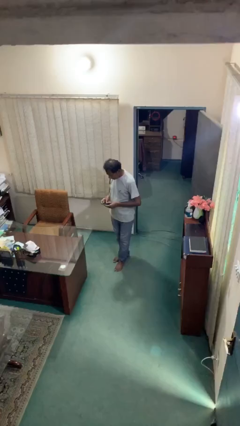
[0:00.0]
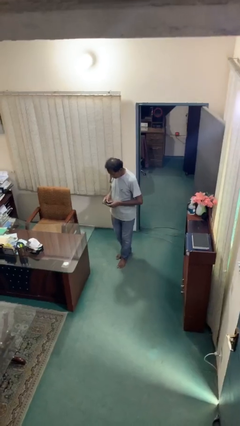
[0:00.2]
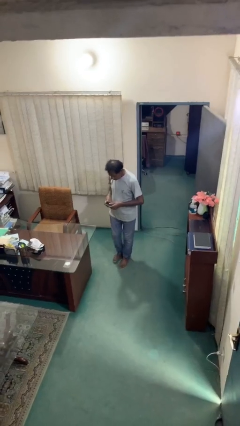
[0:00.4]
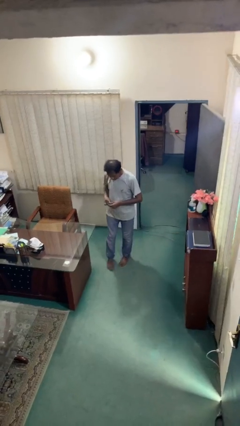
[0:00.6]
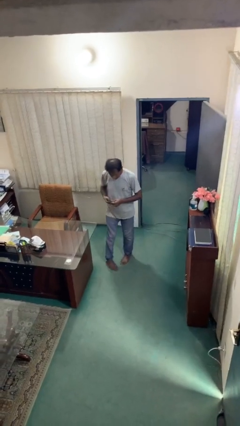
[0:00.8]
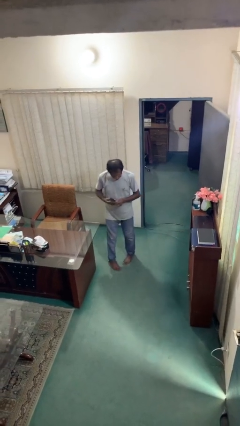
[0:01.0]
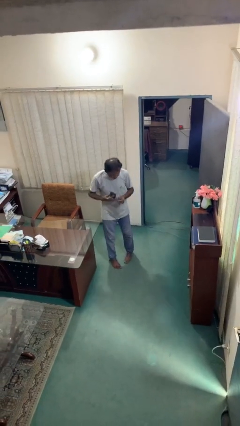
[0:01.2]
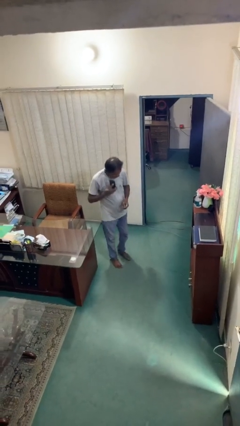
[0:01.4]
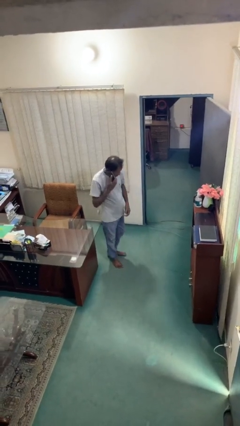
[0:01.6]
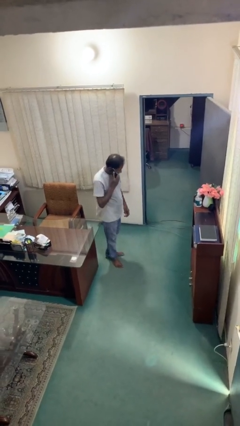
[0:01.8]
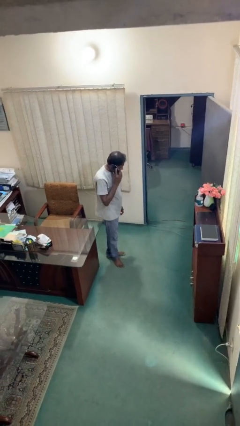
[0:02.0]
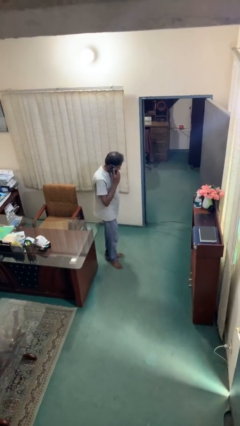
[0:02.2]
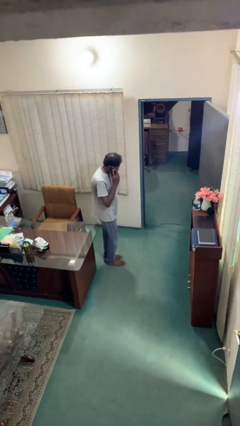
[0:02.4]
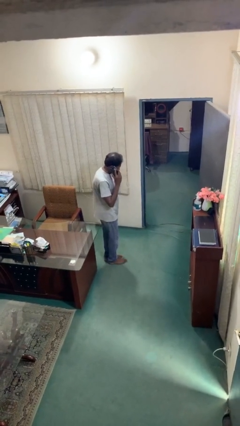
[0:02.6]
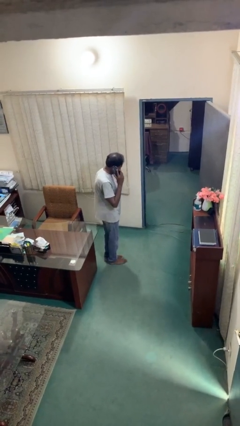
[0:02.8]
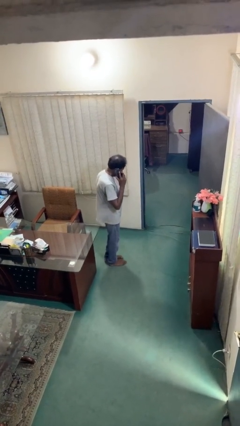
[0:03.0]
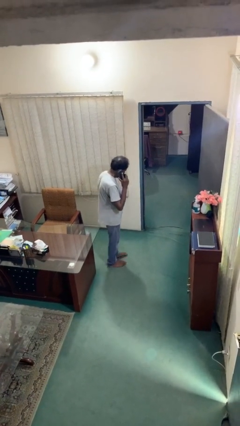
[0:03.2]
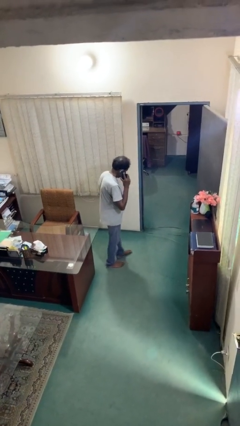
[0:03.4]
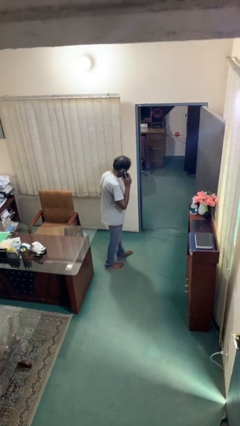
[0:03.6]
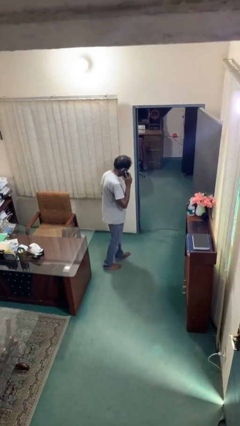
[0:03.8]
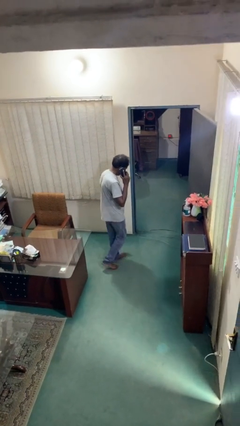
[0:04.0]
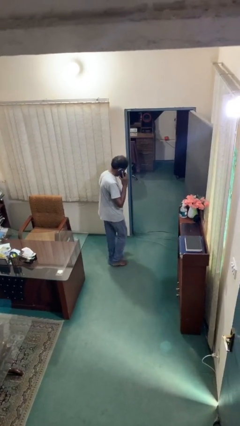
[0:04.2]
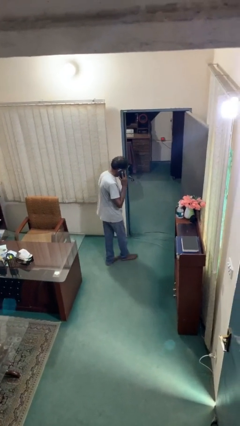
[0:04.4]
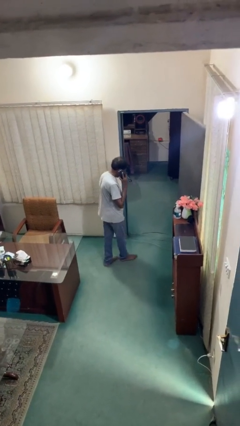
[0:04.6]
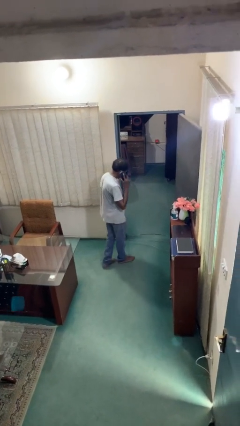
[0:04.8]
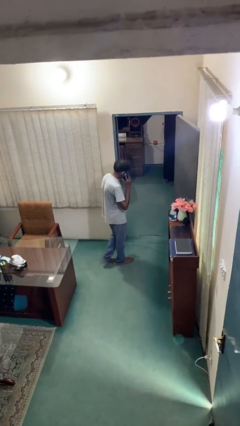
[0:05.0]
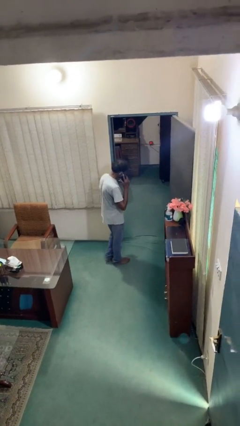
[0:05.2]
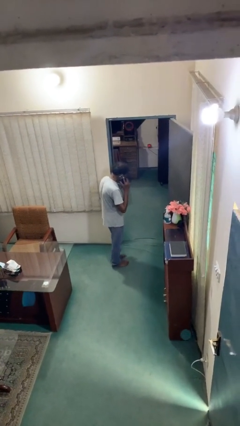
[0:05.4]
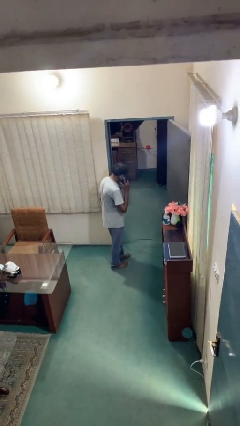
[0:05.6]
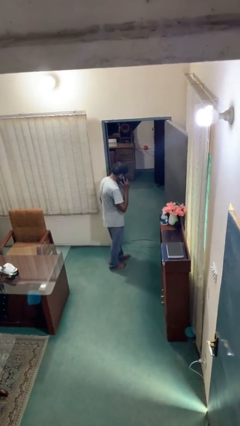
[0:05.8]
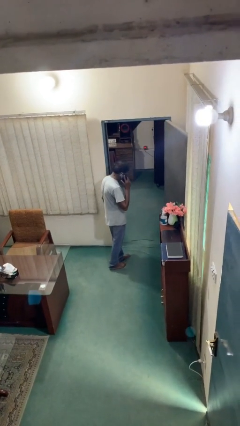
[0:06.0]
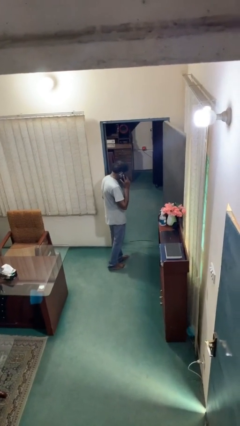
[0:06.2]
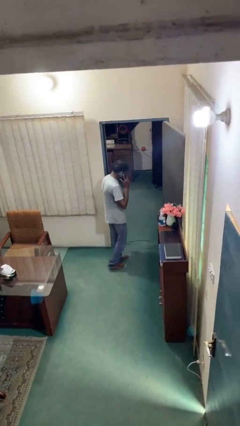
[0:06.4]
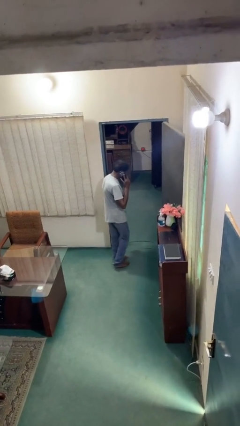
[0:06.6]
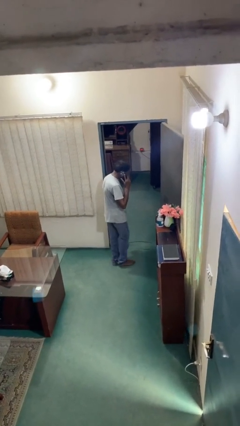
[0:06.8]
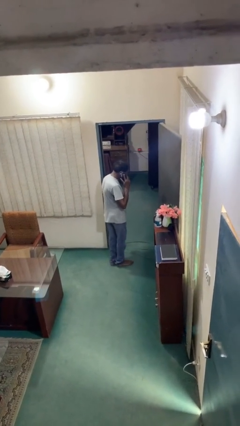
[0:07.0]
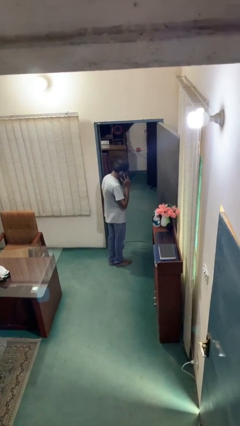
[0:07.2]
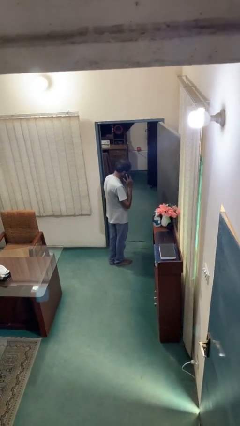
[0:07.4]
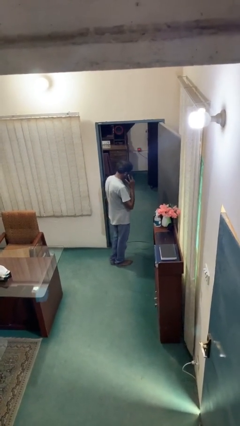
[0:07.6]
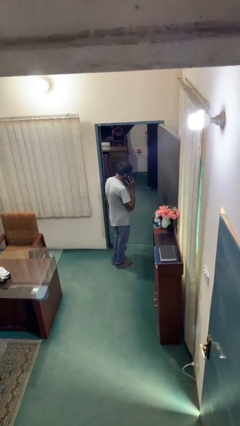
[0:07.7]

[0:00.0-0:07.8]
person talks on phone

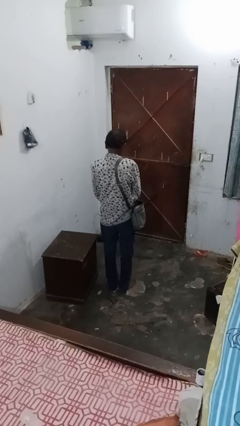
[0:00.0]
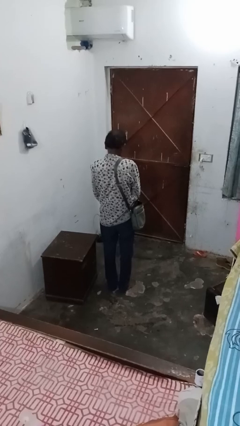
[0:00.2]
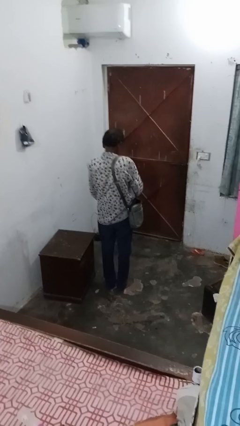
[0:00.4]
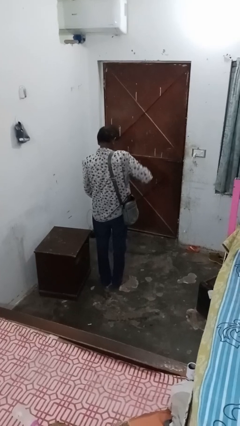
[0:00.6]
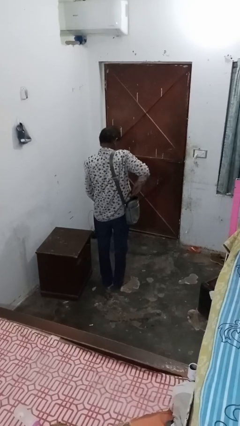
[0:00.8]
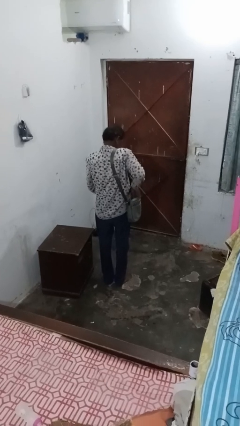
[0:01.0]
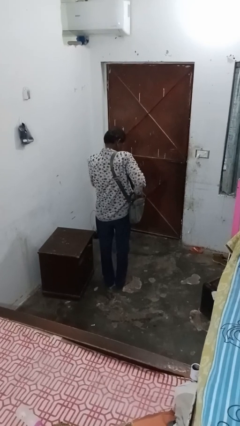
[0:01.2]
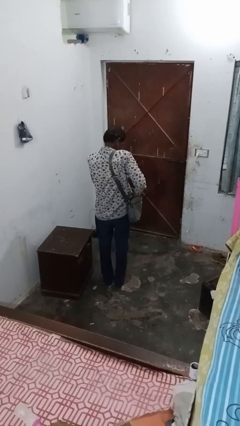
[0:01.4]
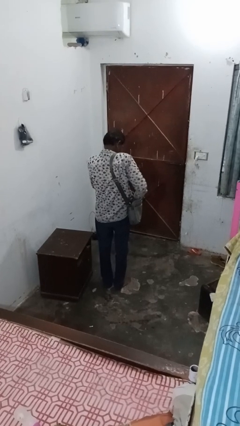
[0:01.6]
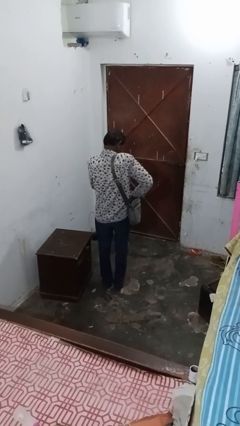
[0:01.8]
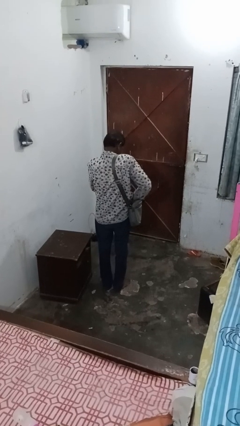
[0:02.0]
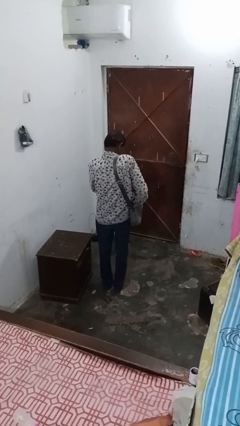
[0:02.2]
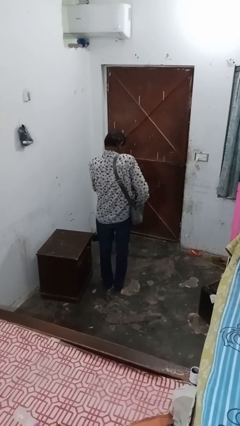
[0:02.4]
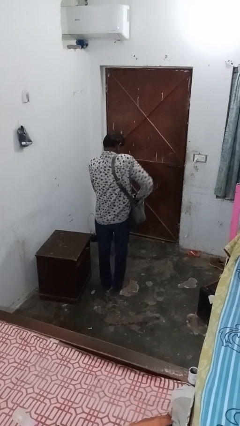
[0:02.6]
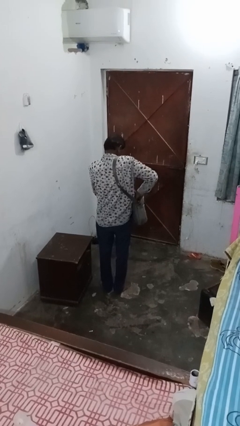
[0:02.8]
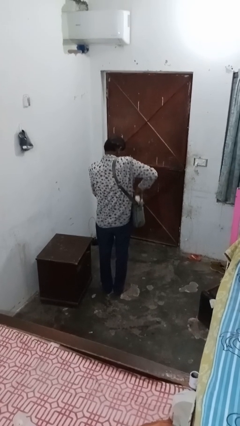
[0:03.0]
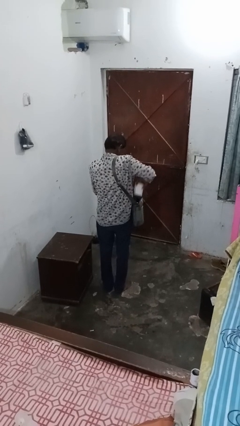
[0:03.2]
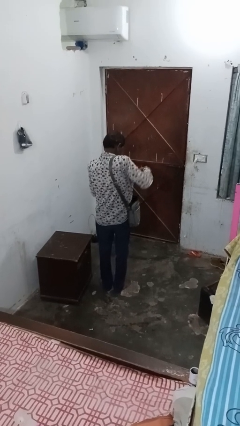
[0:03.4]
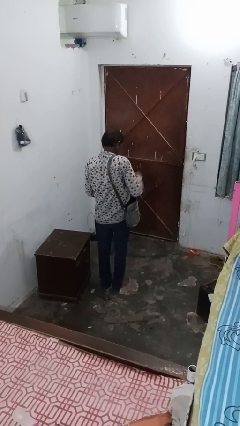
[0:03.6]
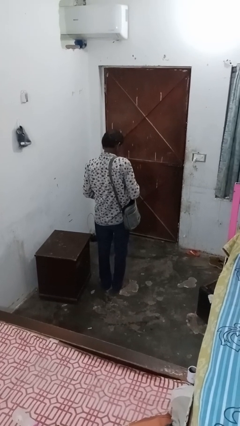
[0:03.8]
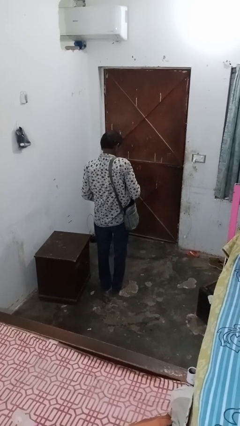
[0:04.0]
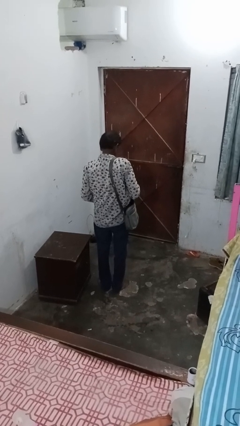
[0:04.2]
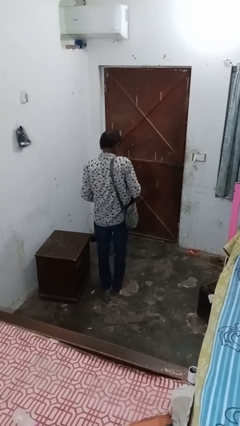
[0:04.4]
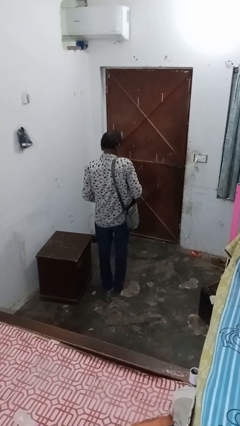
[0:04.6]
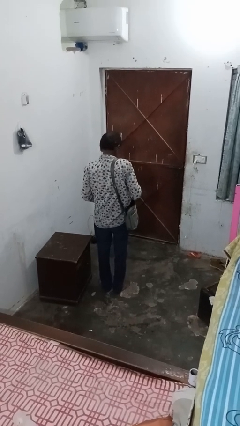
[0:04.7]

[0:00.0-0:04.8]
person takes object from bag

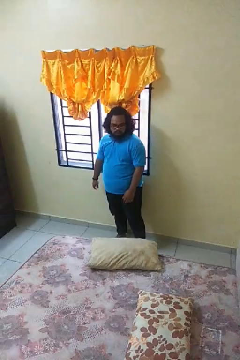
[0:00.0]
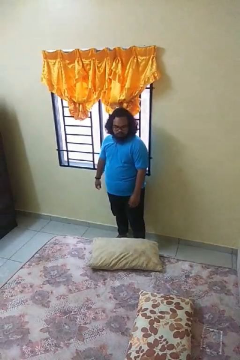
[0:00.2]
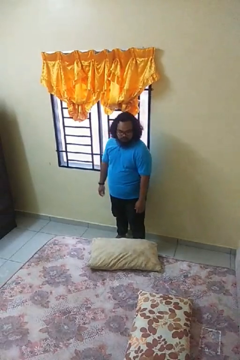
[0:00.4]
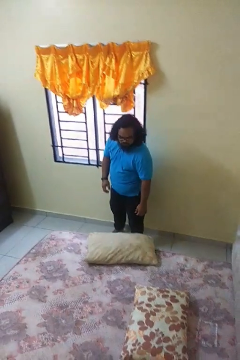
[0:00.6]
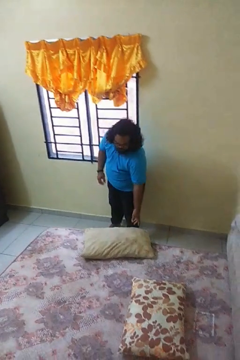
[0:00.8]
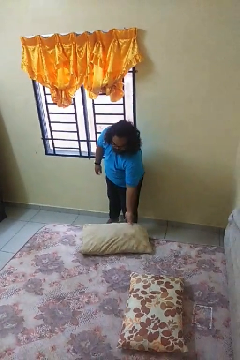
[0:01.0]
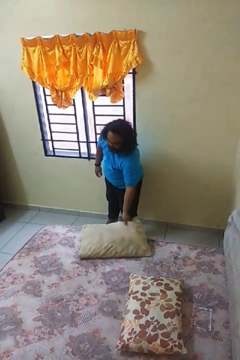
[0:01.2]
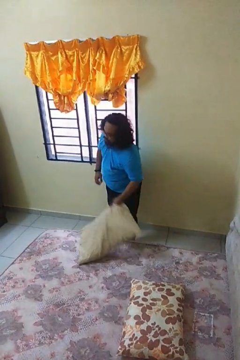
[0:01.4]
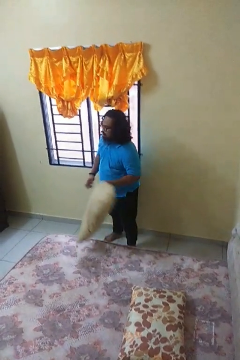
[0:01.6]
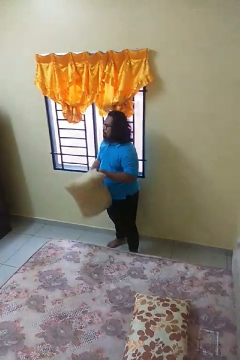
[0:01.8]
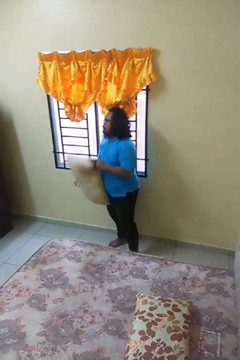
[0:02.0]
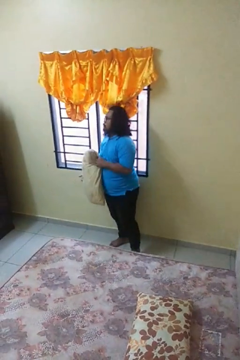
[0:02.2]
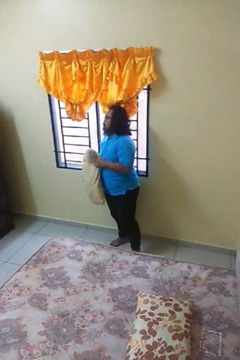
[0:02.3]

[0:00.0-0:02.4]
person picks up object from bed

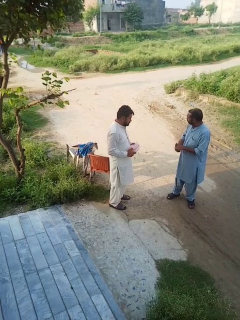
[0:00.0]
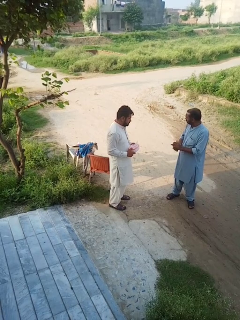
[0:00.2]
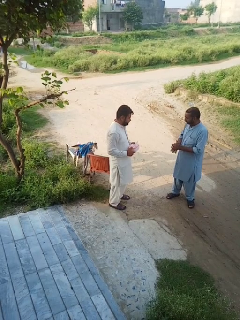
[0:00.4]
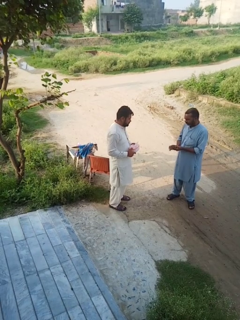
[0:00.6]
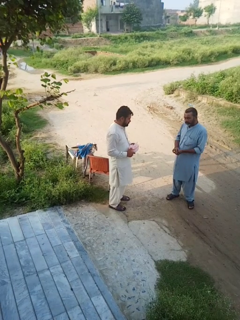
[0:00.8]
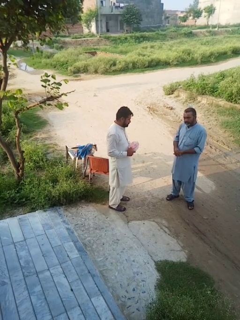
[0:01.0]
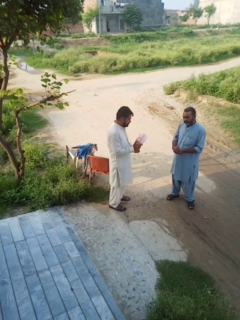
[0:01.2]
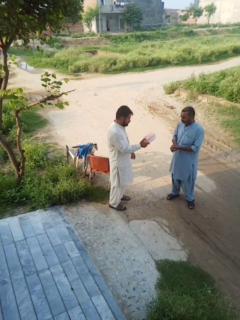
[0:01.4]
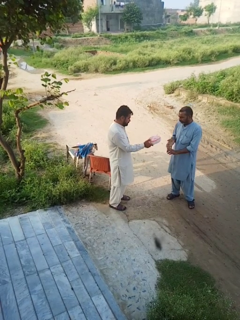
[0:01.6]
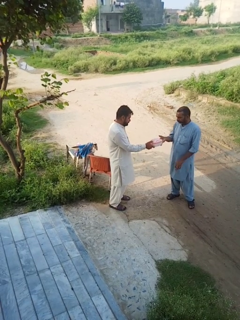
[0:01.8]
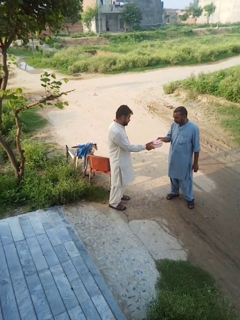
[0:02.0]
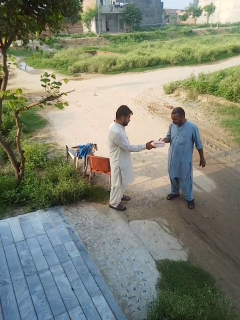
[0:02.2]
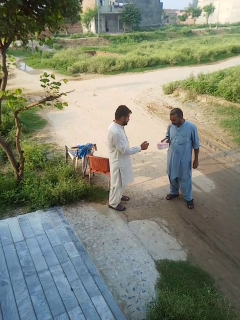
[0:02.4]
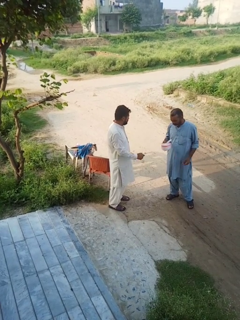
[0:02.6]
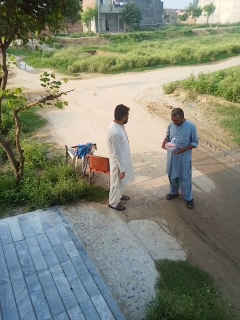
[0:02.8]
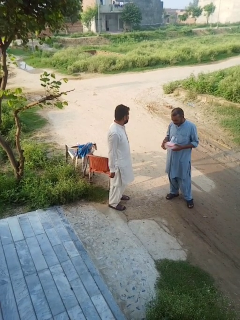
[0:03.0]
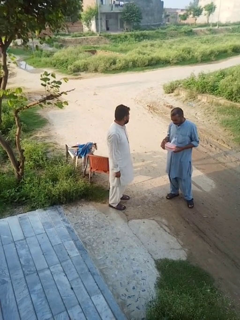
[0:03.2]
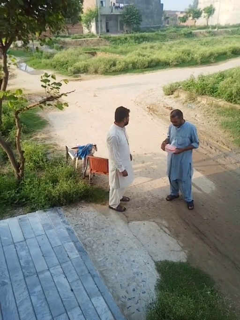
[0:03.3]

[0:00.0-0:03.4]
person transfers object to person

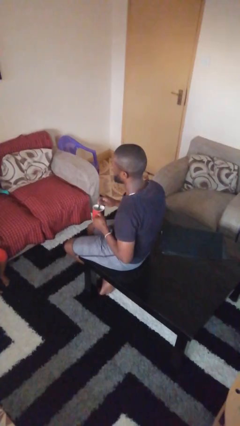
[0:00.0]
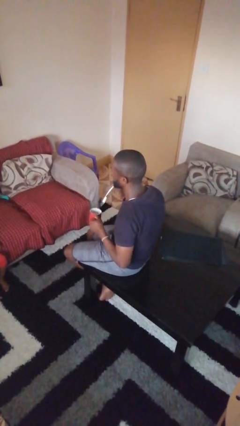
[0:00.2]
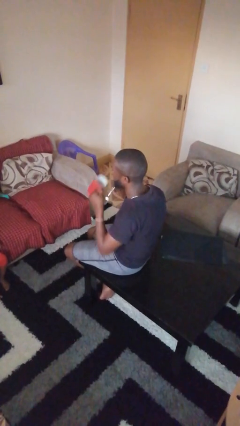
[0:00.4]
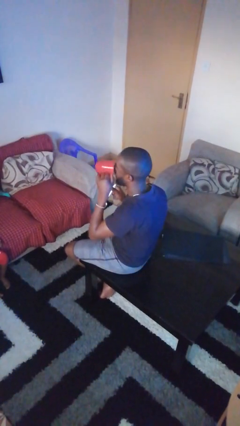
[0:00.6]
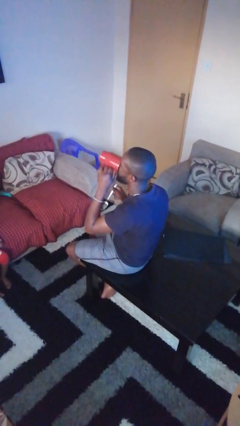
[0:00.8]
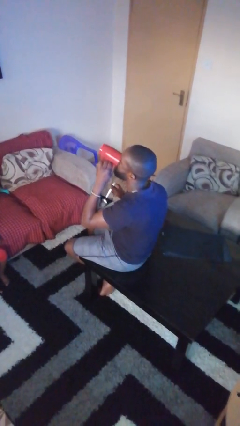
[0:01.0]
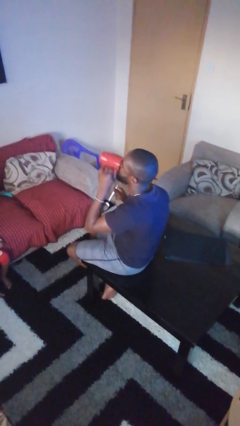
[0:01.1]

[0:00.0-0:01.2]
person drinks from mug
